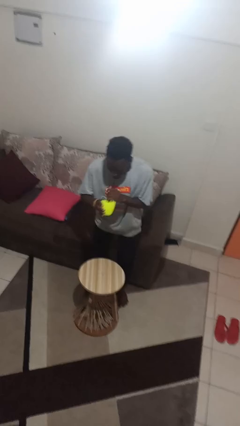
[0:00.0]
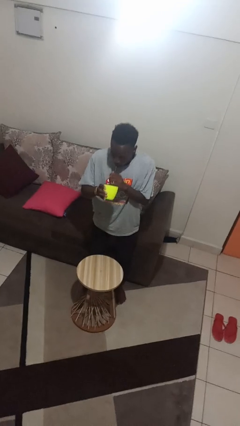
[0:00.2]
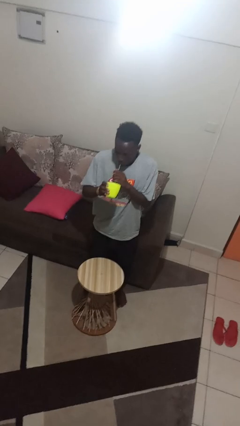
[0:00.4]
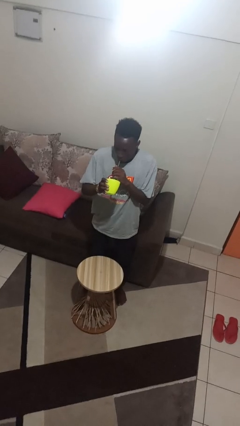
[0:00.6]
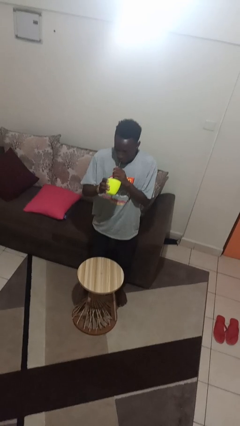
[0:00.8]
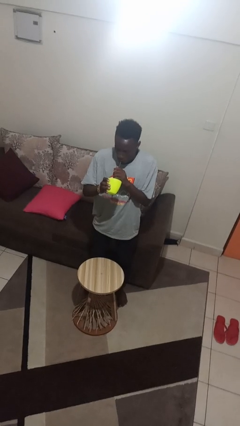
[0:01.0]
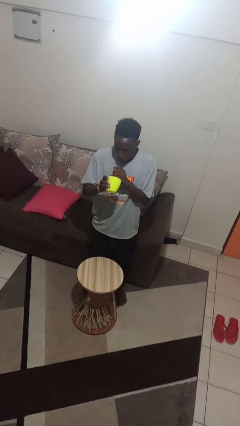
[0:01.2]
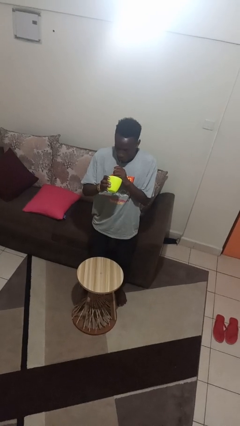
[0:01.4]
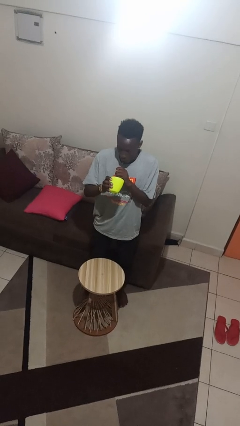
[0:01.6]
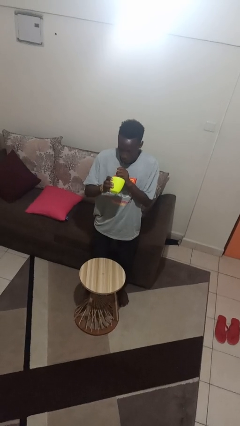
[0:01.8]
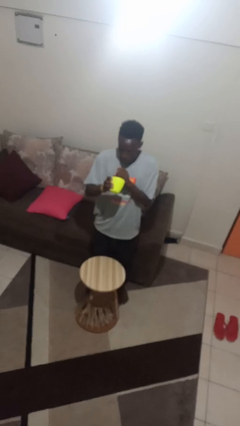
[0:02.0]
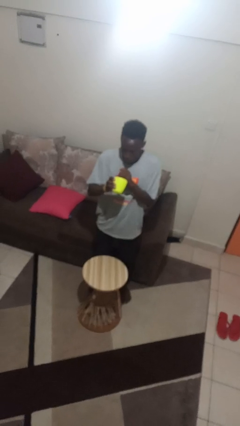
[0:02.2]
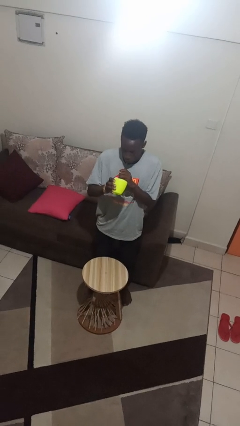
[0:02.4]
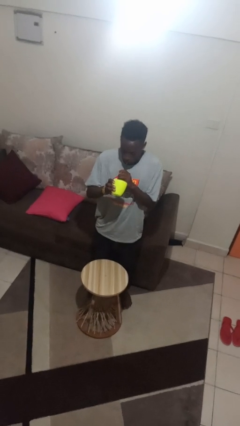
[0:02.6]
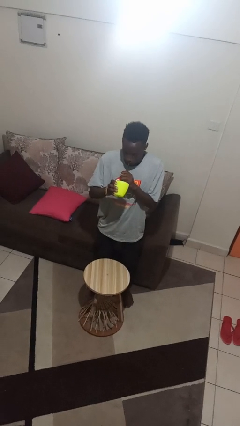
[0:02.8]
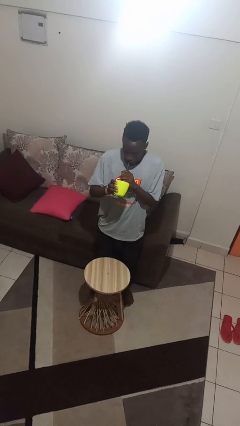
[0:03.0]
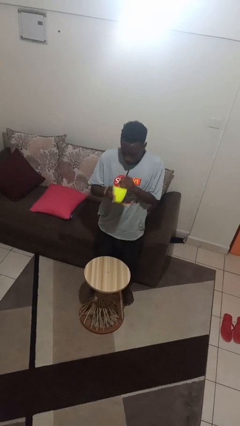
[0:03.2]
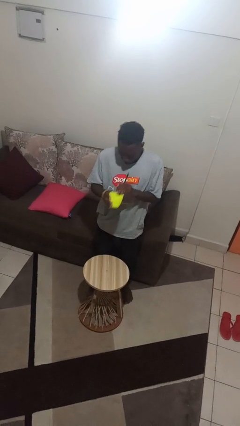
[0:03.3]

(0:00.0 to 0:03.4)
person drinks from straw

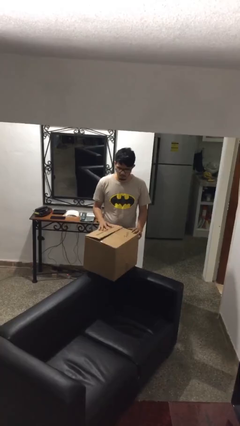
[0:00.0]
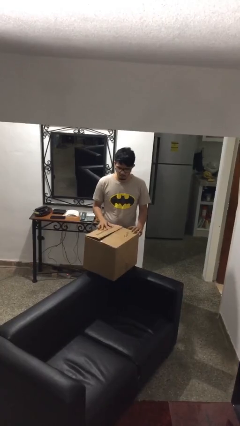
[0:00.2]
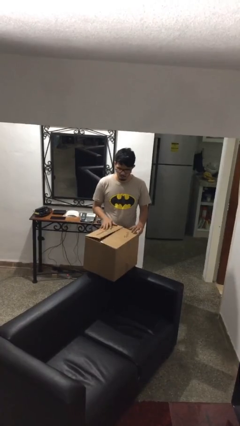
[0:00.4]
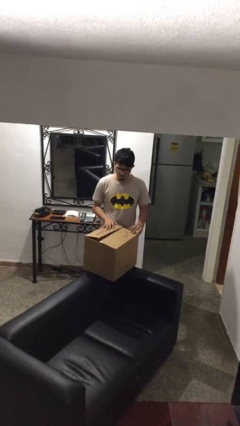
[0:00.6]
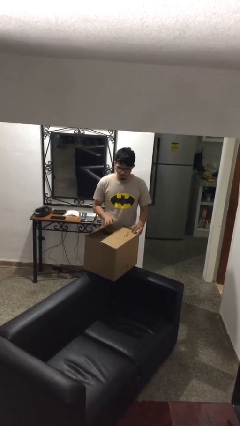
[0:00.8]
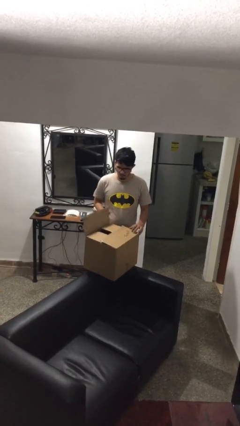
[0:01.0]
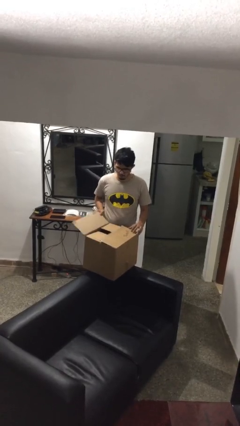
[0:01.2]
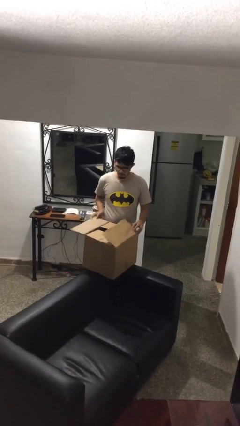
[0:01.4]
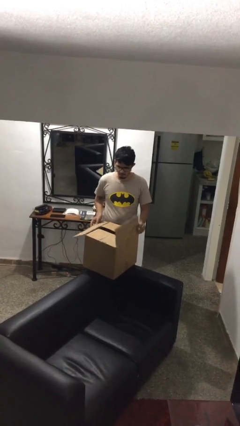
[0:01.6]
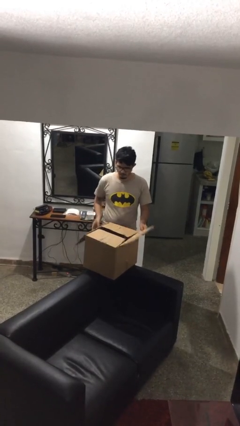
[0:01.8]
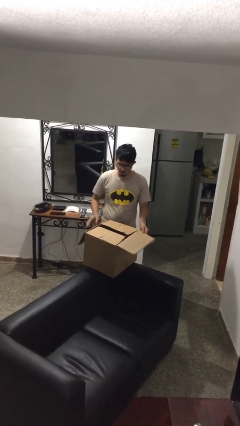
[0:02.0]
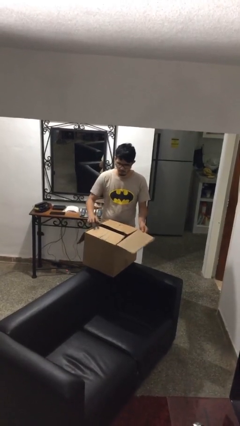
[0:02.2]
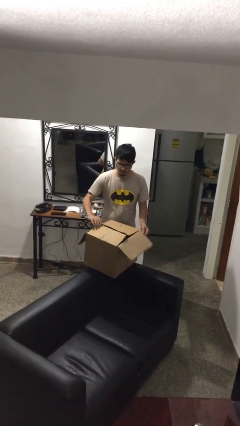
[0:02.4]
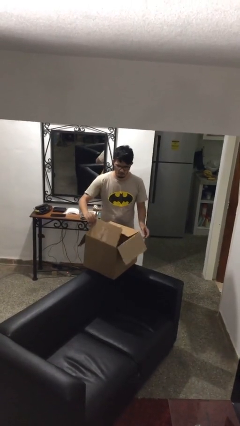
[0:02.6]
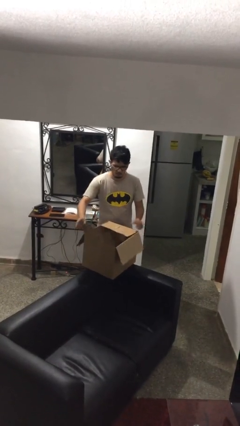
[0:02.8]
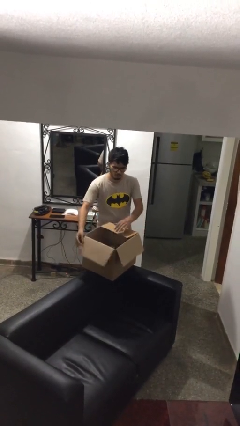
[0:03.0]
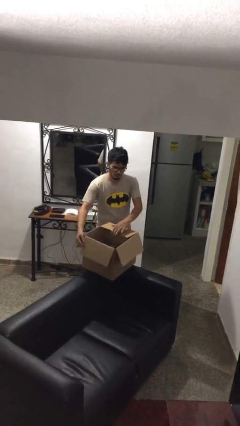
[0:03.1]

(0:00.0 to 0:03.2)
person opens box

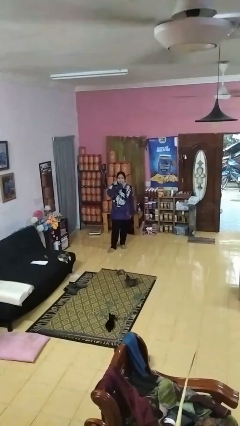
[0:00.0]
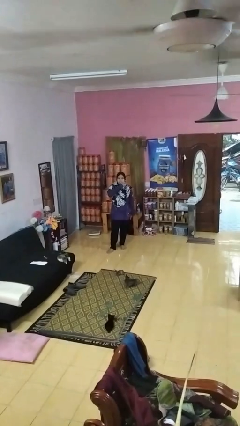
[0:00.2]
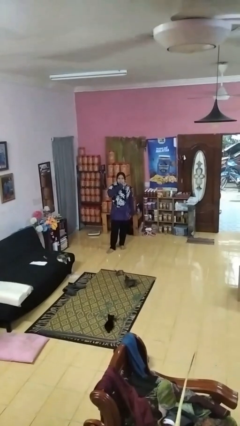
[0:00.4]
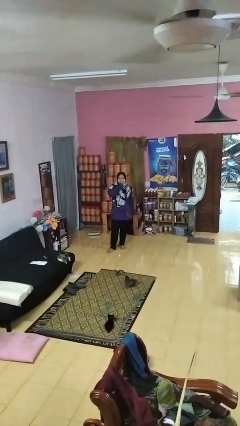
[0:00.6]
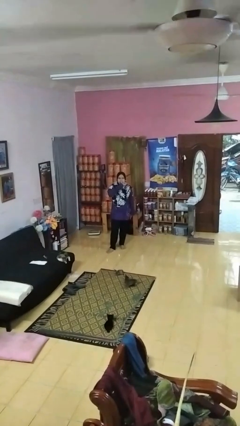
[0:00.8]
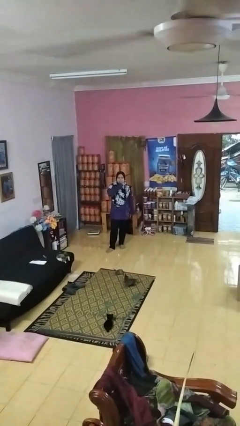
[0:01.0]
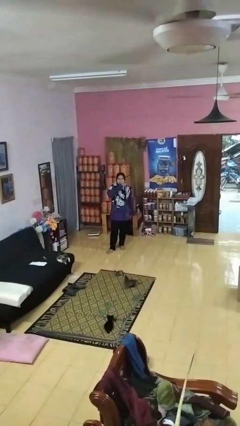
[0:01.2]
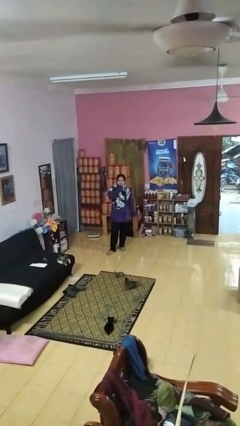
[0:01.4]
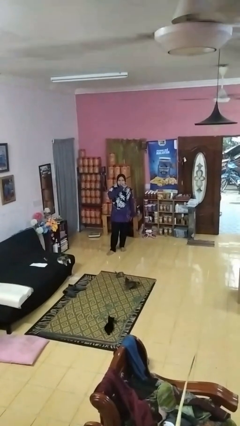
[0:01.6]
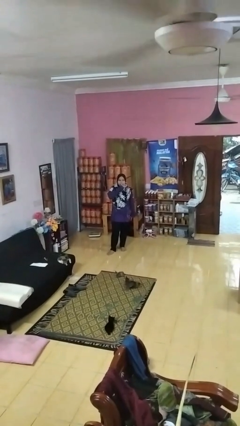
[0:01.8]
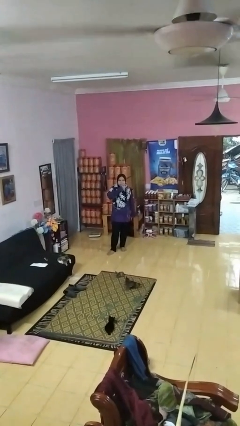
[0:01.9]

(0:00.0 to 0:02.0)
person gestures be quiet

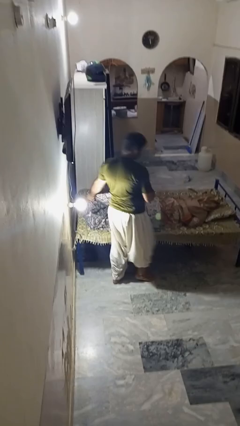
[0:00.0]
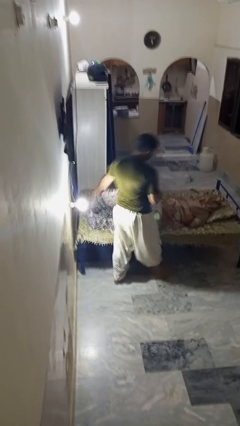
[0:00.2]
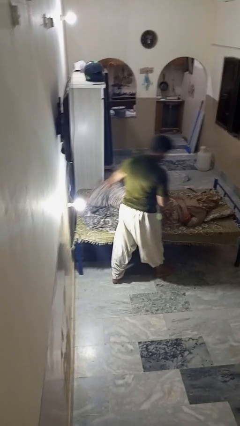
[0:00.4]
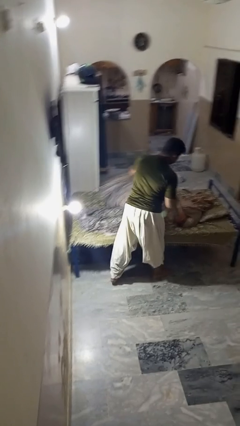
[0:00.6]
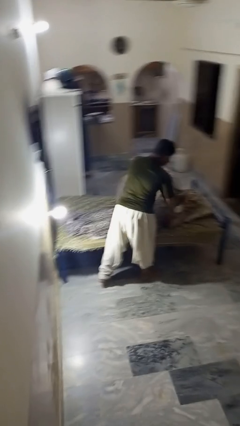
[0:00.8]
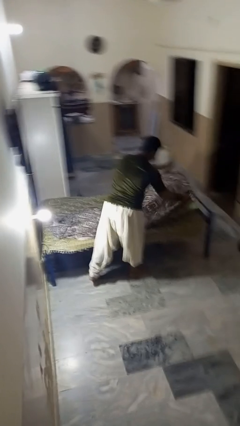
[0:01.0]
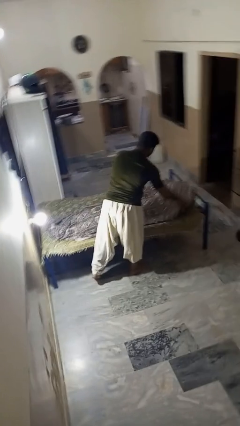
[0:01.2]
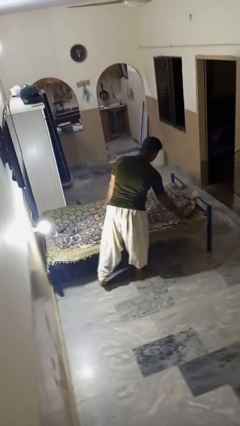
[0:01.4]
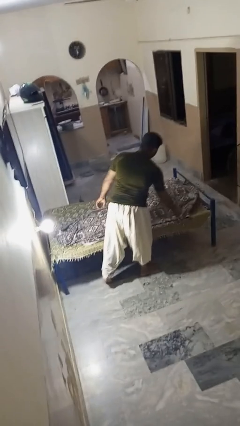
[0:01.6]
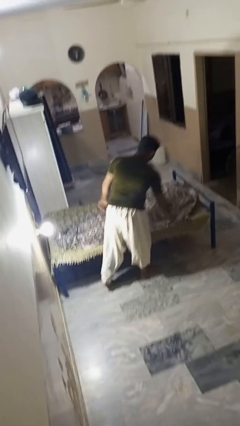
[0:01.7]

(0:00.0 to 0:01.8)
person covers friend with blanket

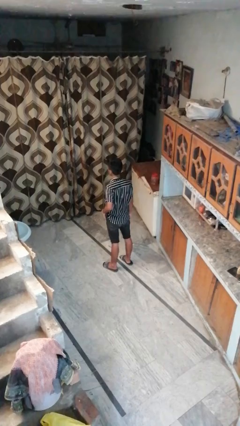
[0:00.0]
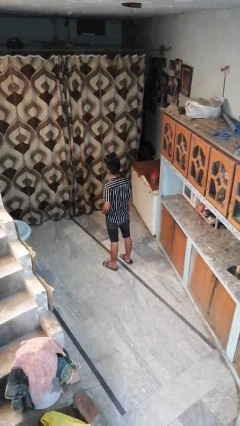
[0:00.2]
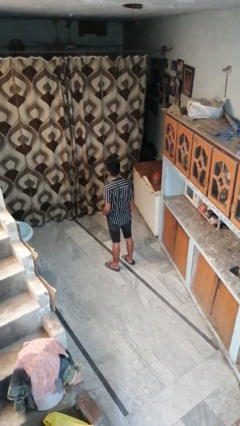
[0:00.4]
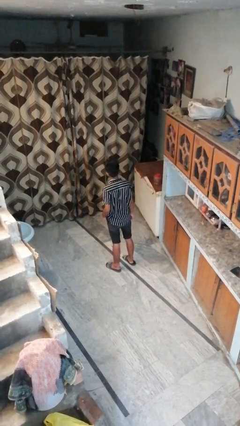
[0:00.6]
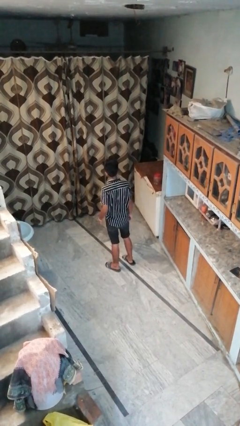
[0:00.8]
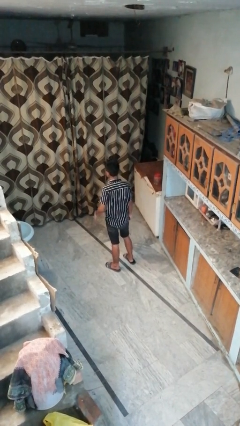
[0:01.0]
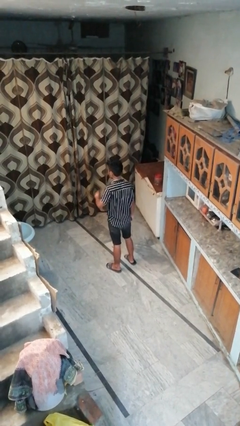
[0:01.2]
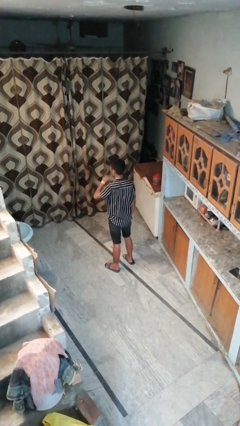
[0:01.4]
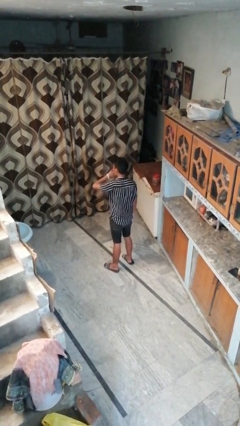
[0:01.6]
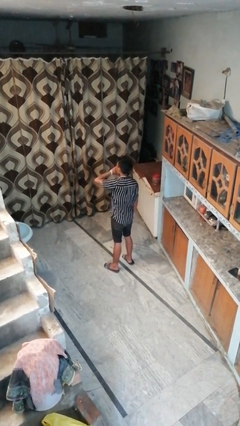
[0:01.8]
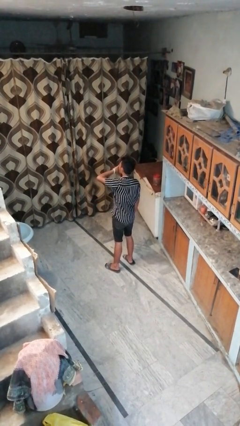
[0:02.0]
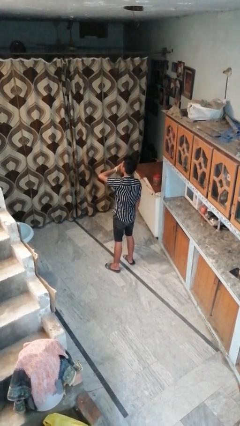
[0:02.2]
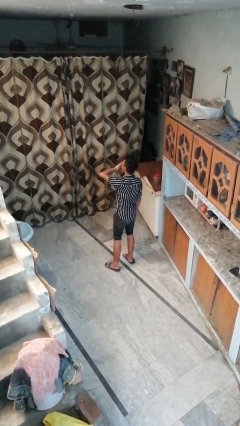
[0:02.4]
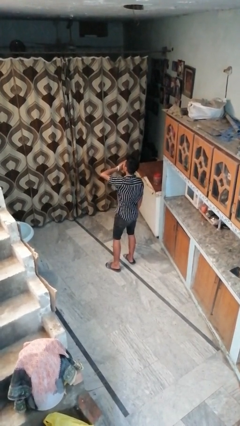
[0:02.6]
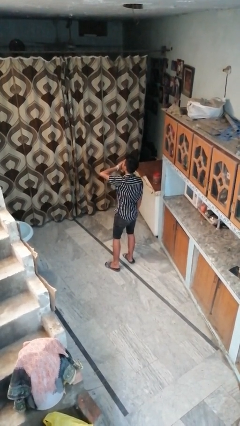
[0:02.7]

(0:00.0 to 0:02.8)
person yawns

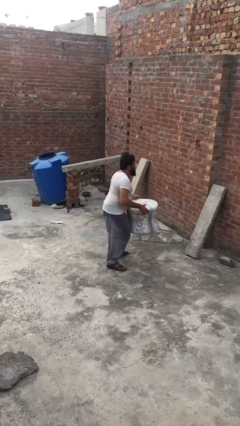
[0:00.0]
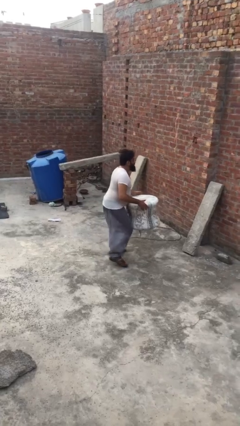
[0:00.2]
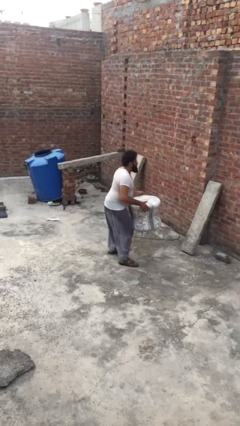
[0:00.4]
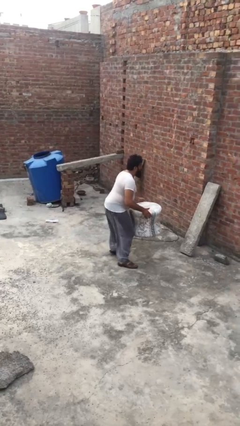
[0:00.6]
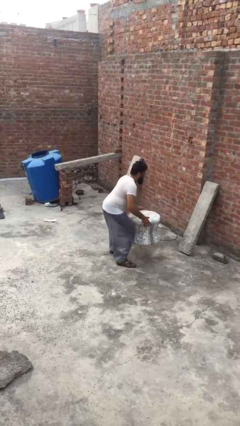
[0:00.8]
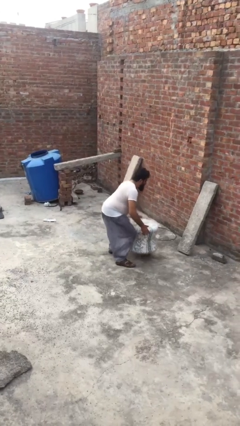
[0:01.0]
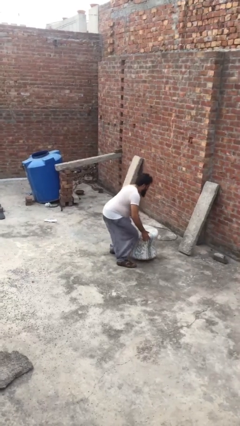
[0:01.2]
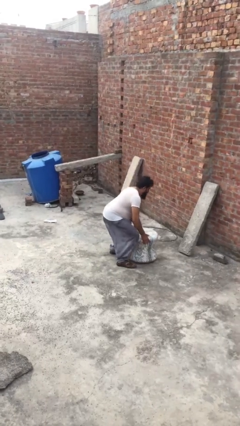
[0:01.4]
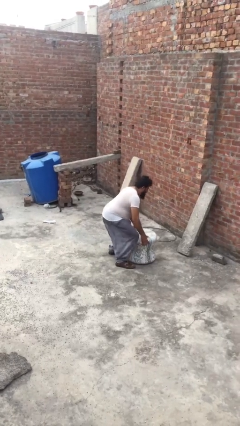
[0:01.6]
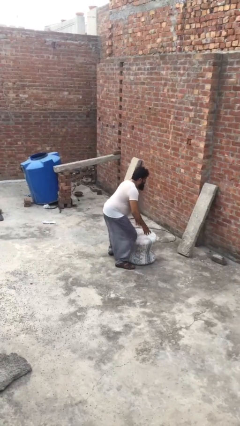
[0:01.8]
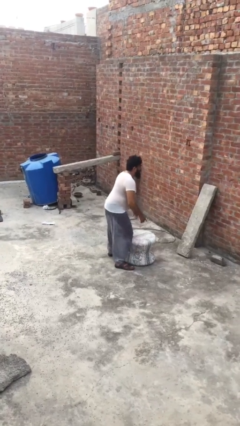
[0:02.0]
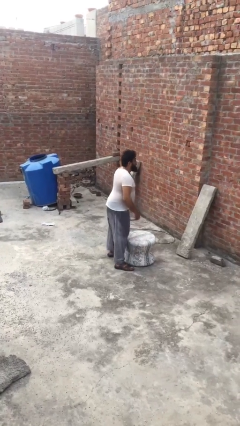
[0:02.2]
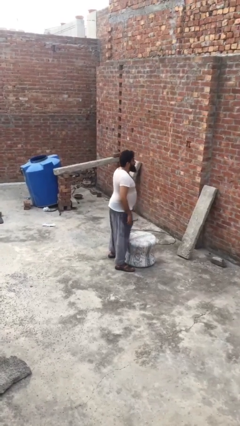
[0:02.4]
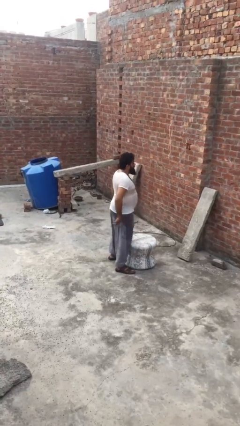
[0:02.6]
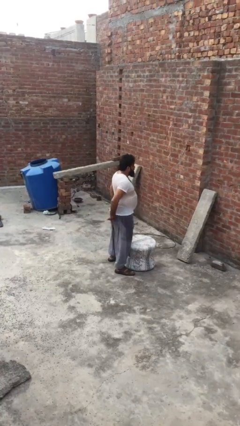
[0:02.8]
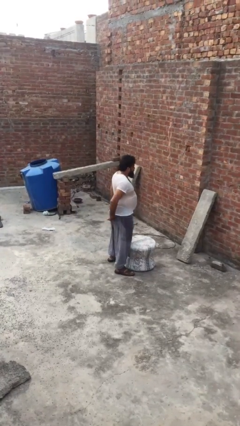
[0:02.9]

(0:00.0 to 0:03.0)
person puts down object on floor

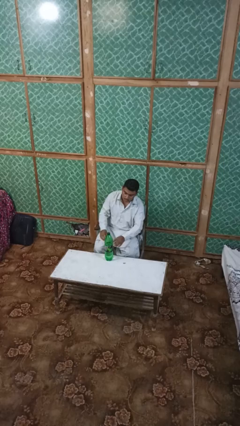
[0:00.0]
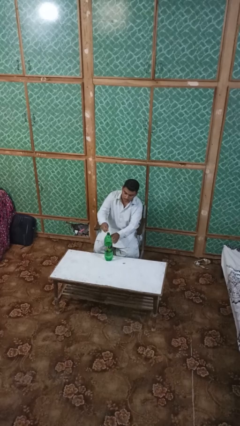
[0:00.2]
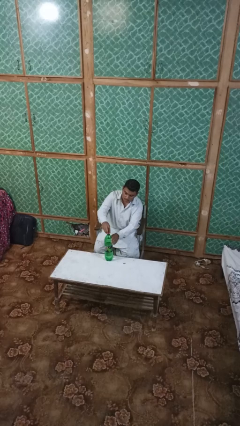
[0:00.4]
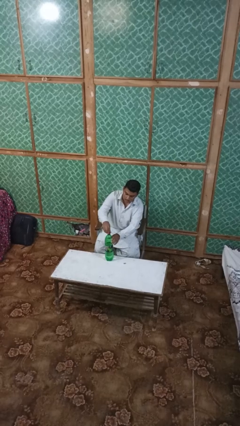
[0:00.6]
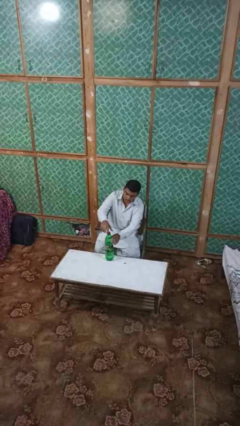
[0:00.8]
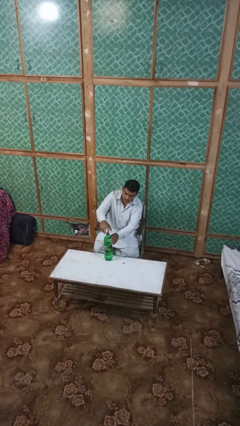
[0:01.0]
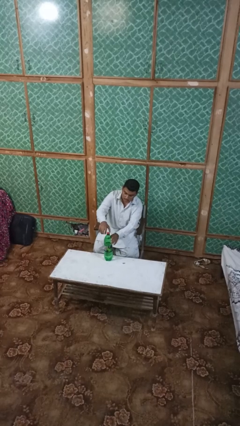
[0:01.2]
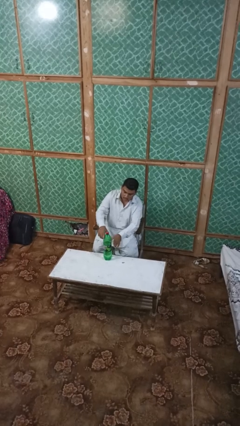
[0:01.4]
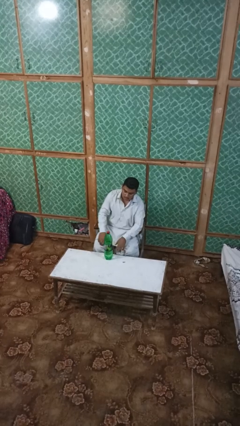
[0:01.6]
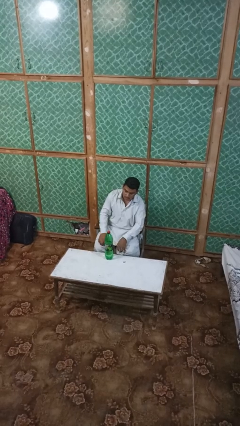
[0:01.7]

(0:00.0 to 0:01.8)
person screws lid to bottle
